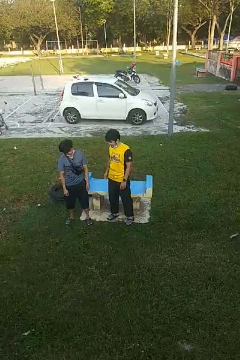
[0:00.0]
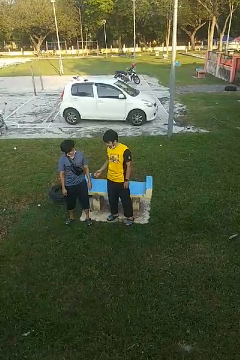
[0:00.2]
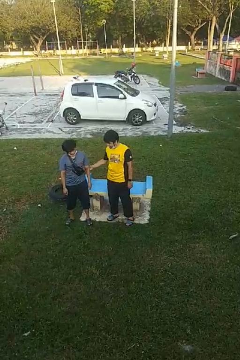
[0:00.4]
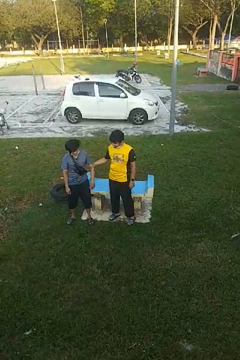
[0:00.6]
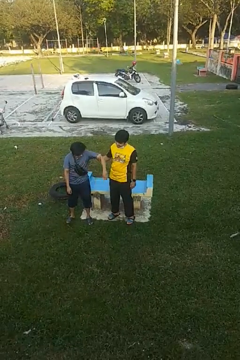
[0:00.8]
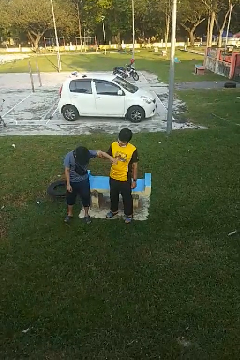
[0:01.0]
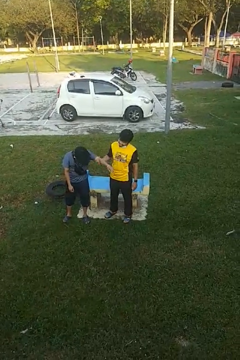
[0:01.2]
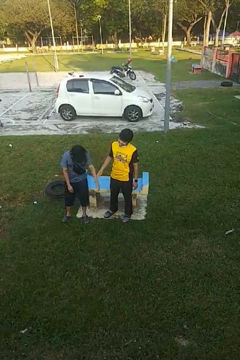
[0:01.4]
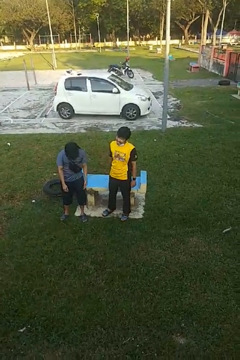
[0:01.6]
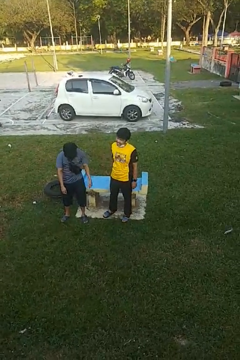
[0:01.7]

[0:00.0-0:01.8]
person grabs person by bicep

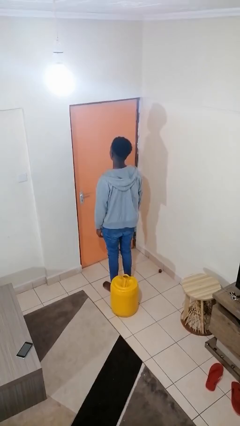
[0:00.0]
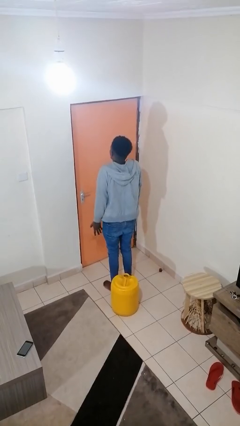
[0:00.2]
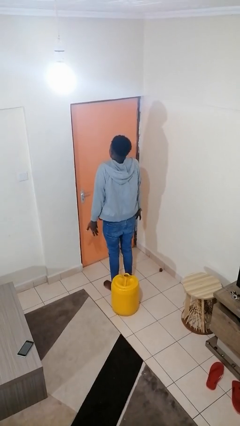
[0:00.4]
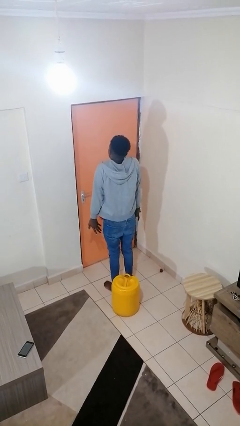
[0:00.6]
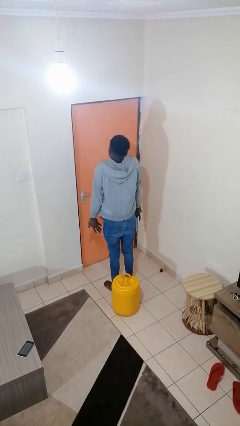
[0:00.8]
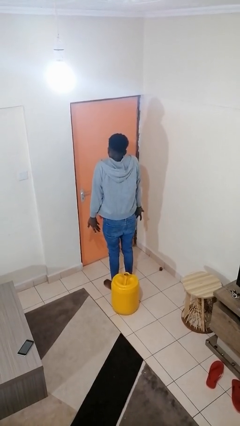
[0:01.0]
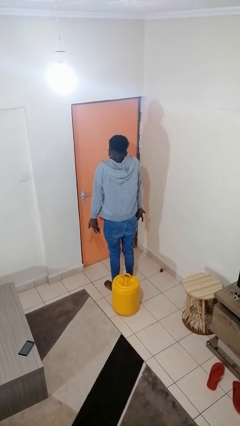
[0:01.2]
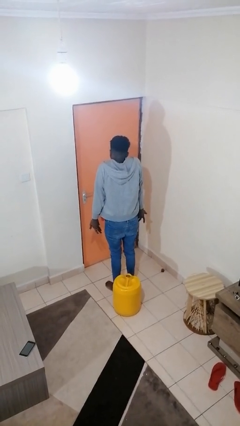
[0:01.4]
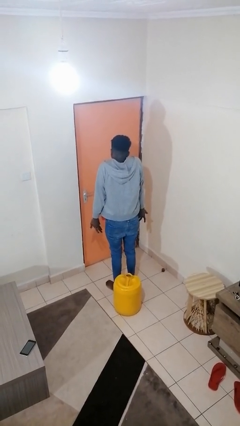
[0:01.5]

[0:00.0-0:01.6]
person shrugs

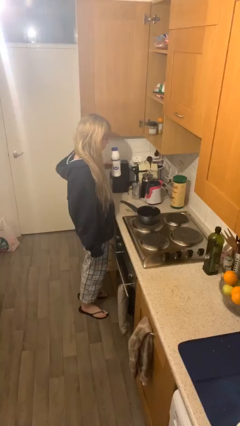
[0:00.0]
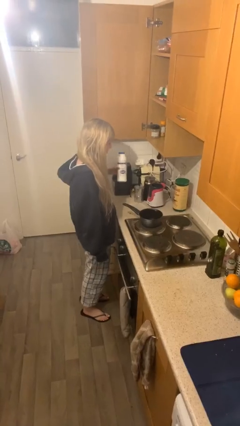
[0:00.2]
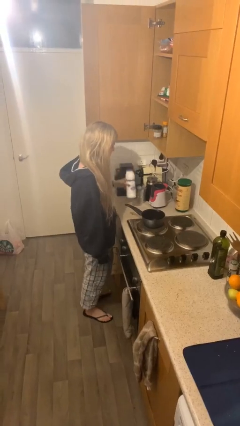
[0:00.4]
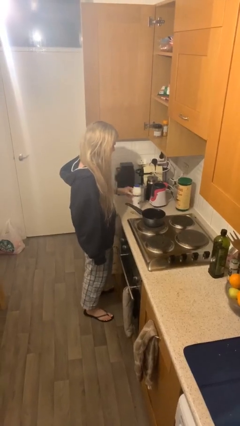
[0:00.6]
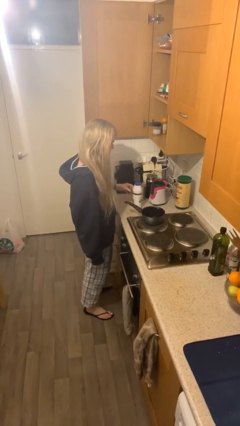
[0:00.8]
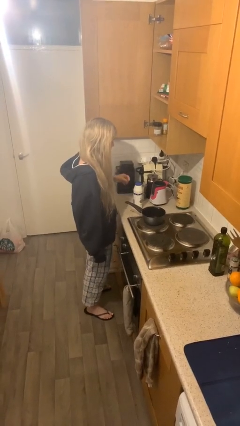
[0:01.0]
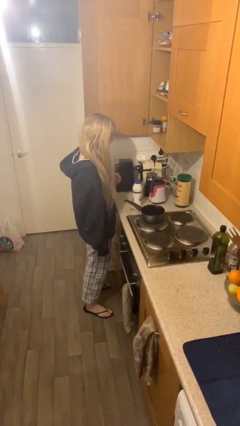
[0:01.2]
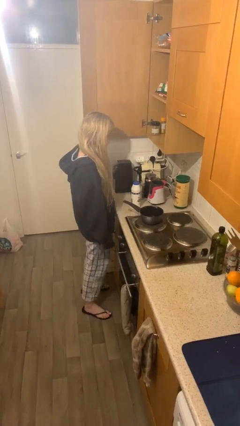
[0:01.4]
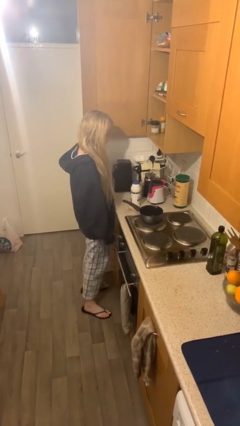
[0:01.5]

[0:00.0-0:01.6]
person puts down object on table

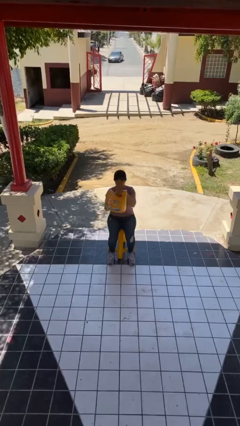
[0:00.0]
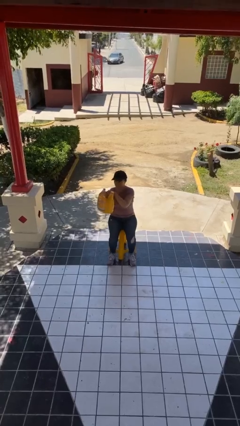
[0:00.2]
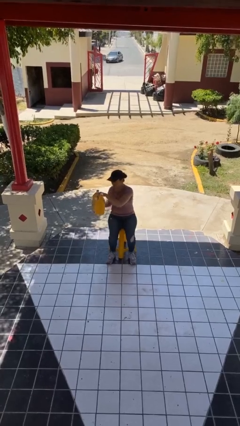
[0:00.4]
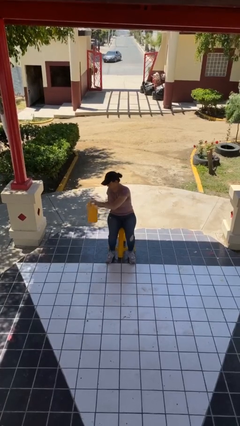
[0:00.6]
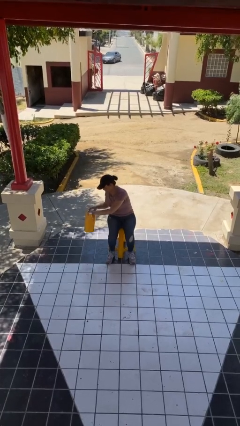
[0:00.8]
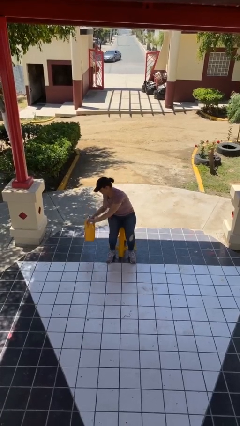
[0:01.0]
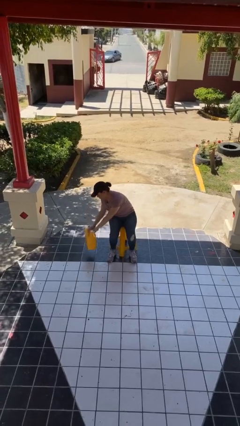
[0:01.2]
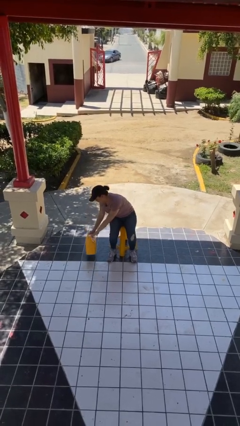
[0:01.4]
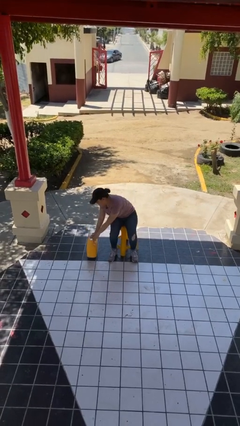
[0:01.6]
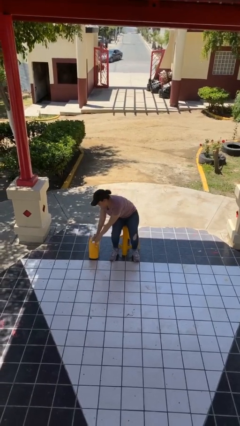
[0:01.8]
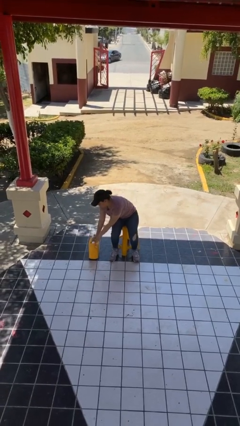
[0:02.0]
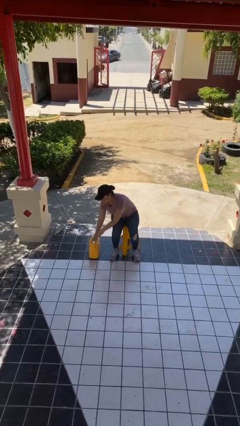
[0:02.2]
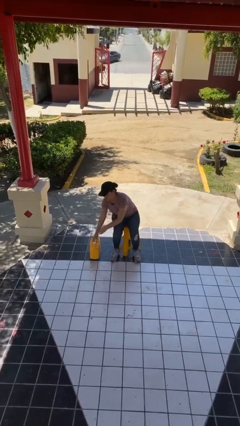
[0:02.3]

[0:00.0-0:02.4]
person puts down object on floor

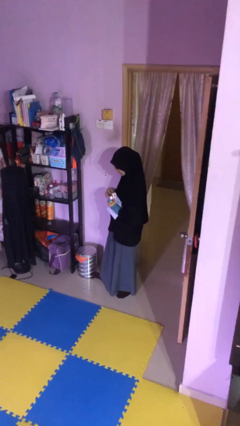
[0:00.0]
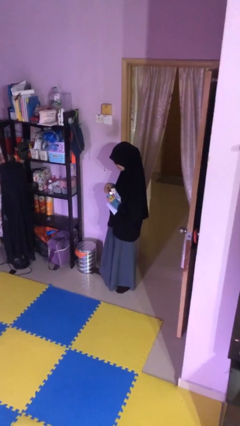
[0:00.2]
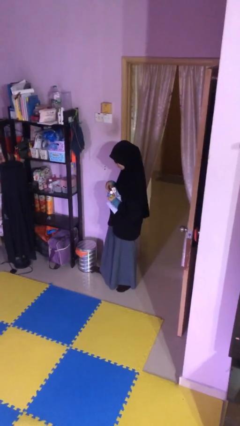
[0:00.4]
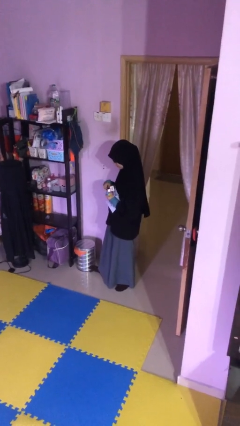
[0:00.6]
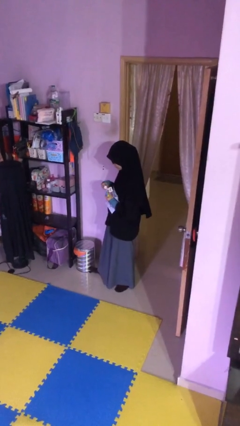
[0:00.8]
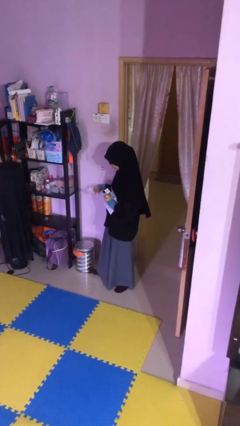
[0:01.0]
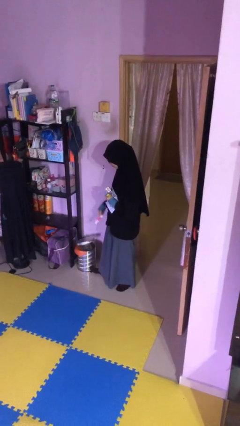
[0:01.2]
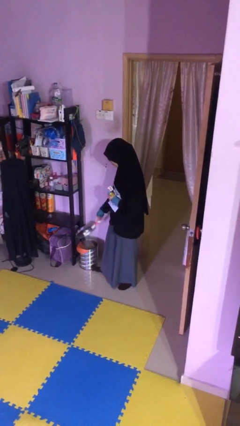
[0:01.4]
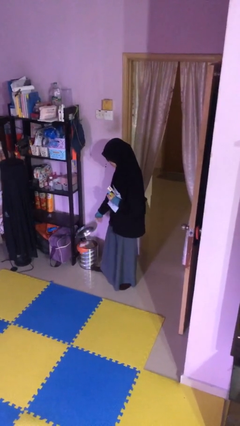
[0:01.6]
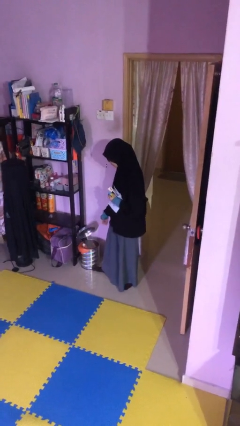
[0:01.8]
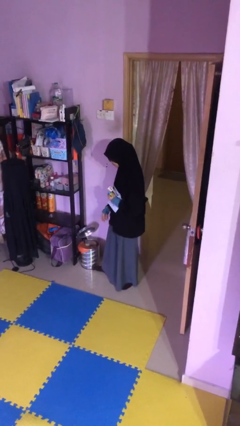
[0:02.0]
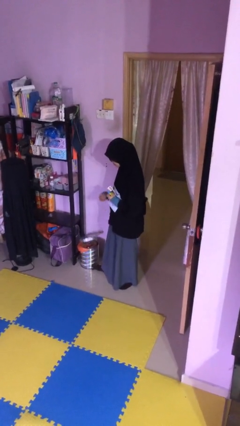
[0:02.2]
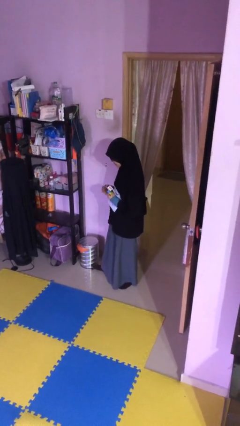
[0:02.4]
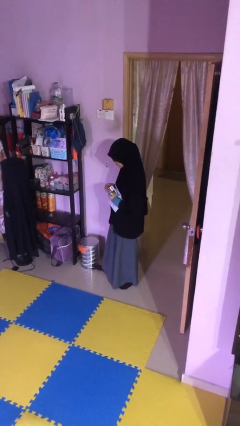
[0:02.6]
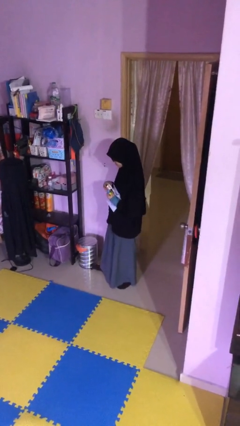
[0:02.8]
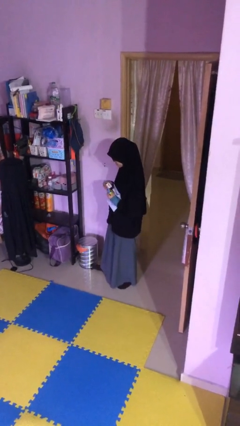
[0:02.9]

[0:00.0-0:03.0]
person discards trash

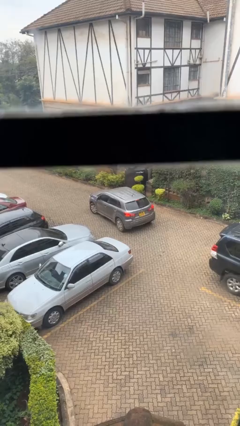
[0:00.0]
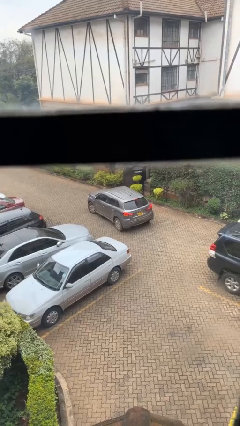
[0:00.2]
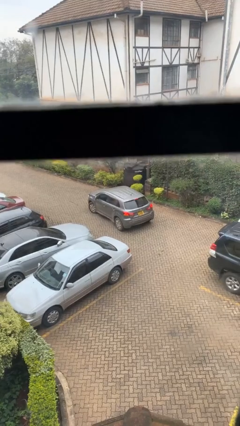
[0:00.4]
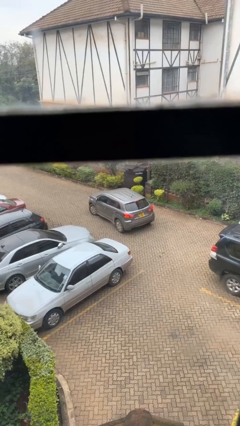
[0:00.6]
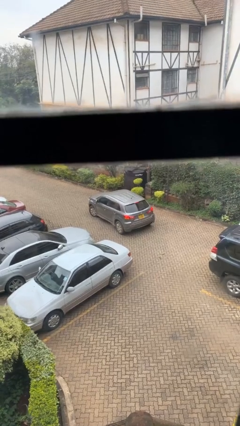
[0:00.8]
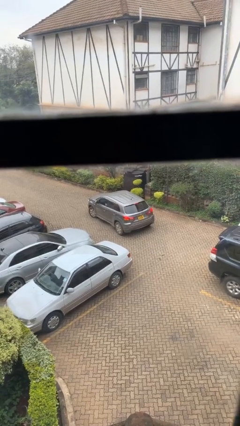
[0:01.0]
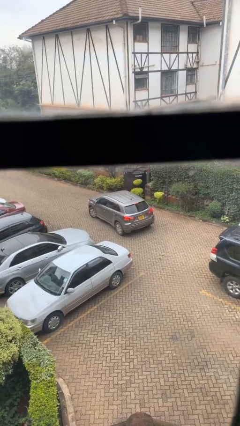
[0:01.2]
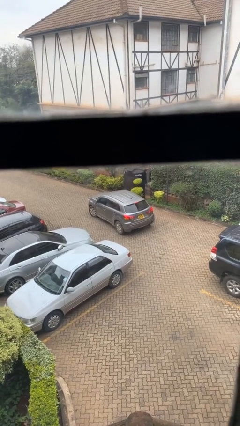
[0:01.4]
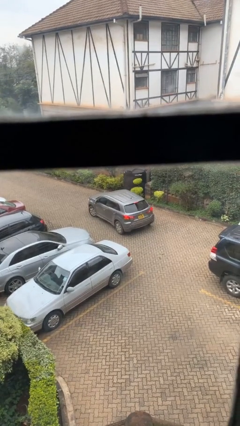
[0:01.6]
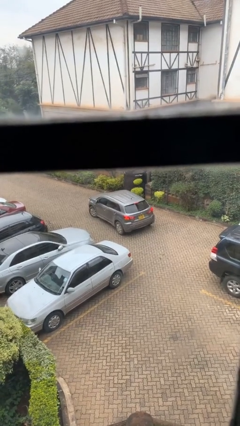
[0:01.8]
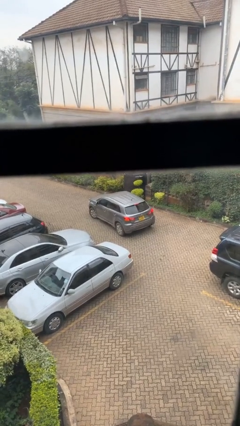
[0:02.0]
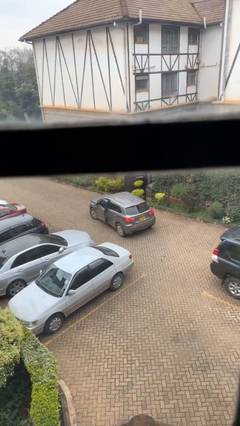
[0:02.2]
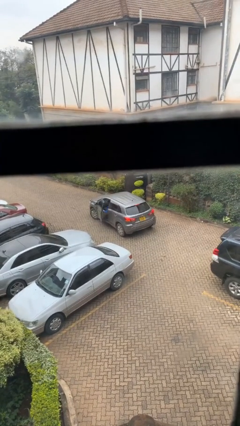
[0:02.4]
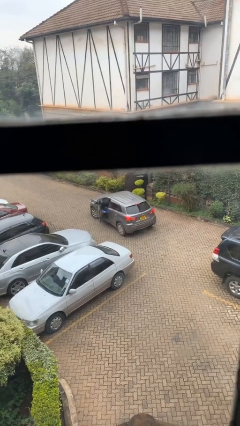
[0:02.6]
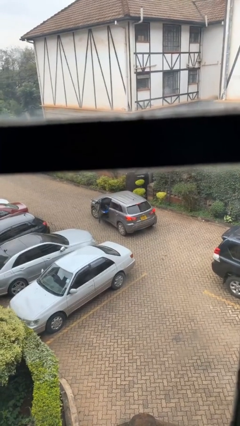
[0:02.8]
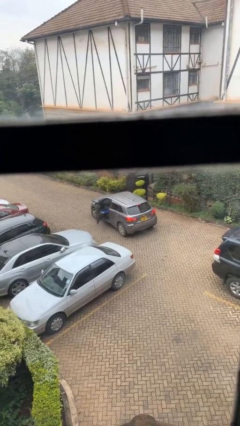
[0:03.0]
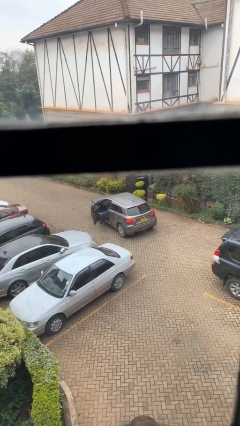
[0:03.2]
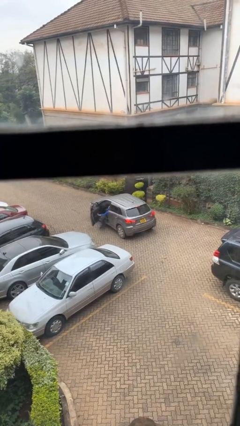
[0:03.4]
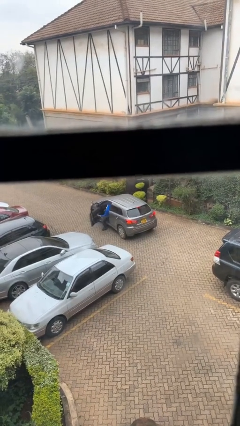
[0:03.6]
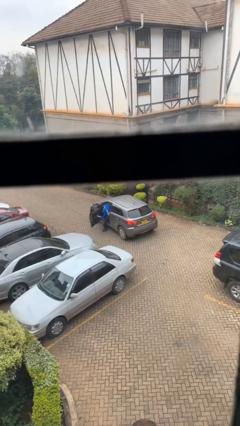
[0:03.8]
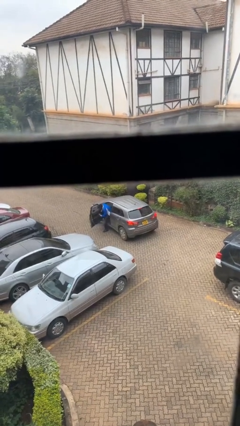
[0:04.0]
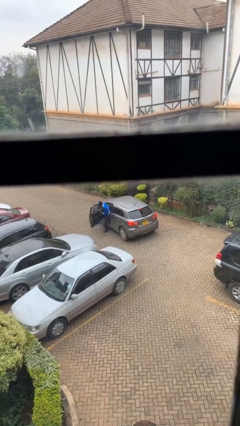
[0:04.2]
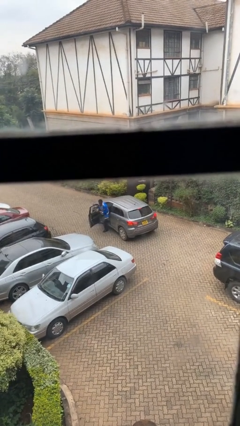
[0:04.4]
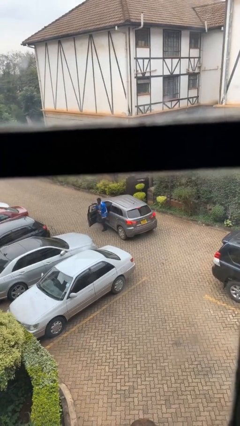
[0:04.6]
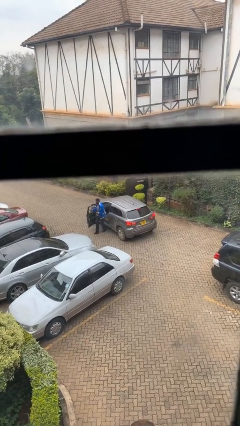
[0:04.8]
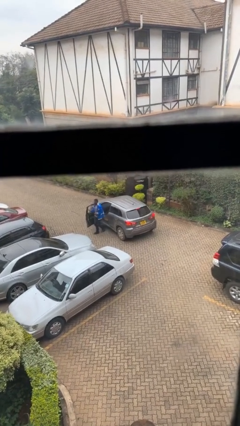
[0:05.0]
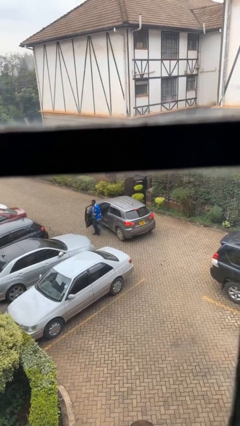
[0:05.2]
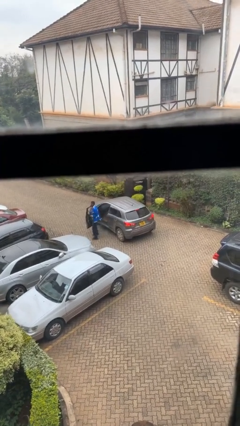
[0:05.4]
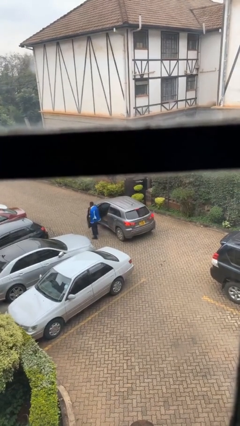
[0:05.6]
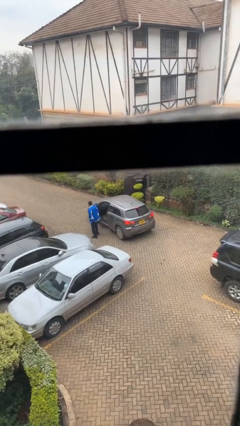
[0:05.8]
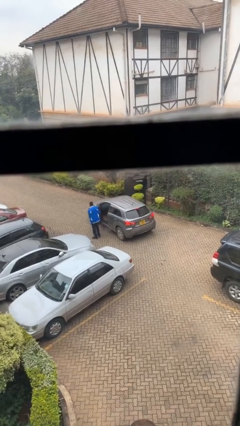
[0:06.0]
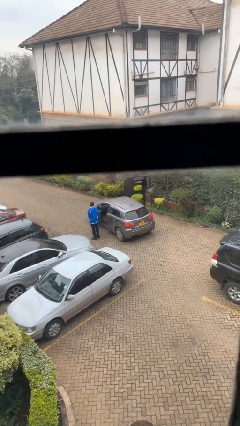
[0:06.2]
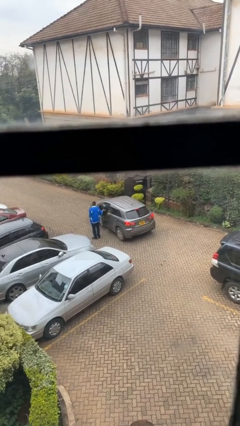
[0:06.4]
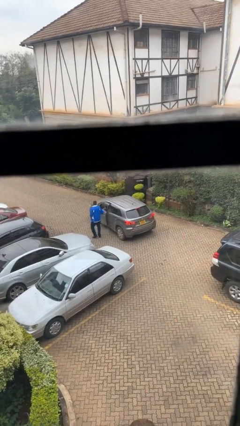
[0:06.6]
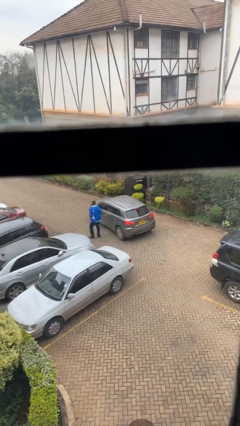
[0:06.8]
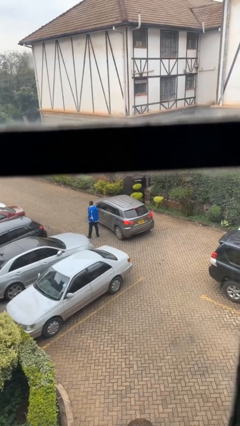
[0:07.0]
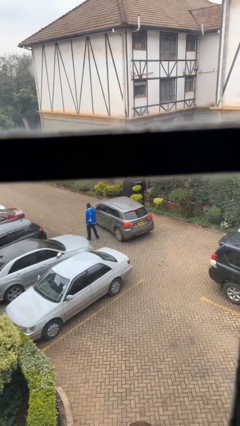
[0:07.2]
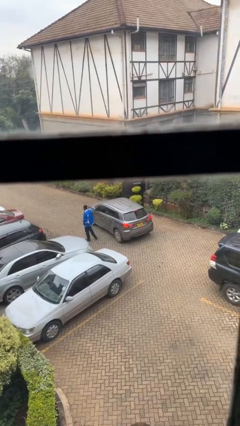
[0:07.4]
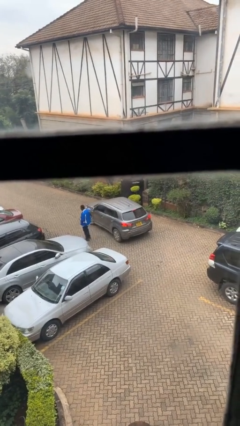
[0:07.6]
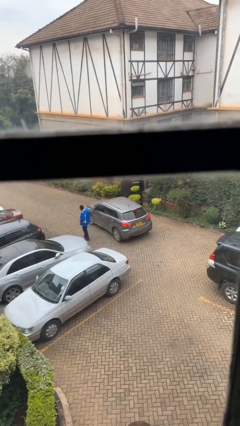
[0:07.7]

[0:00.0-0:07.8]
car drops off person
